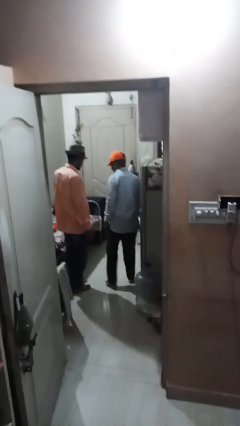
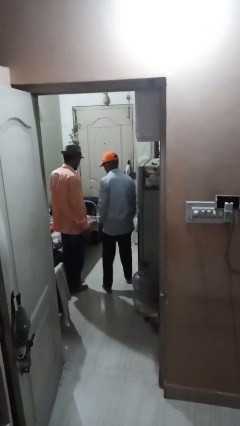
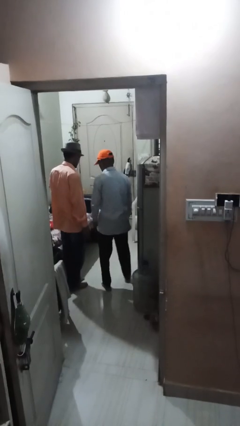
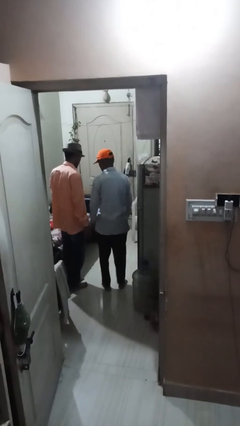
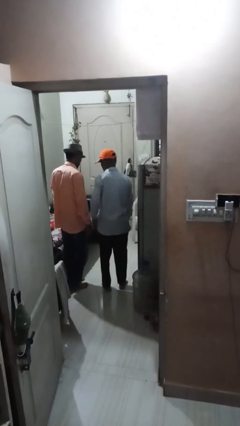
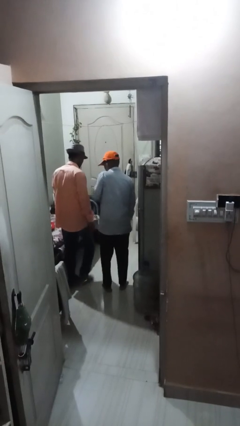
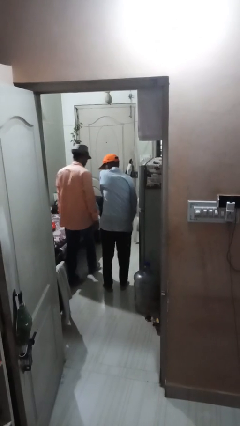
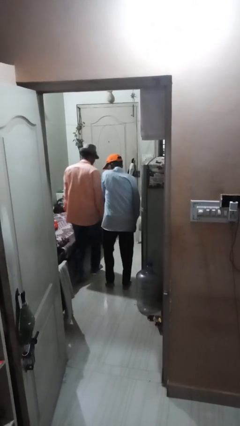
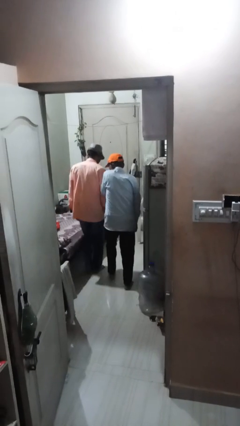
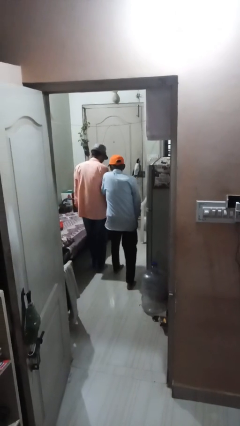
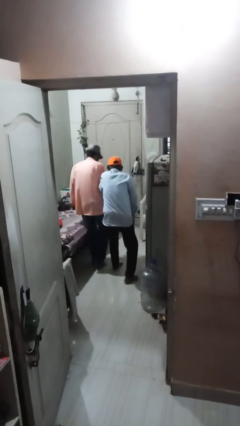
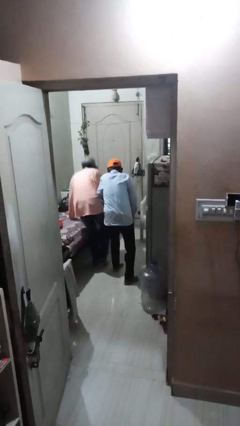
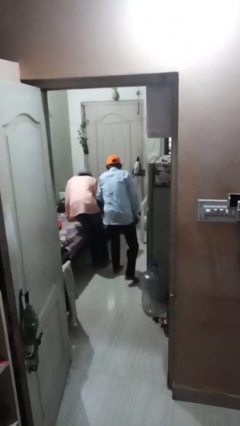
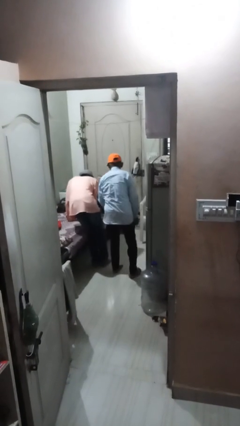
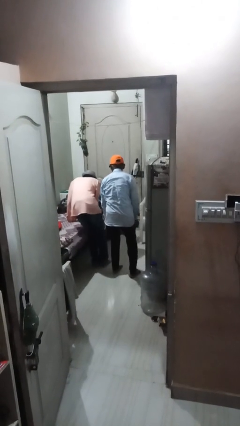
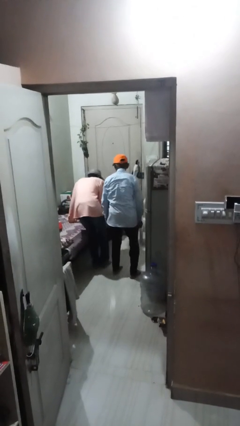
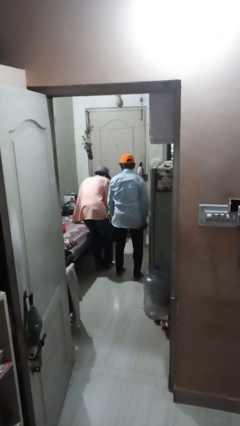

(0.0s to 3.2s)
person bumps into person

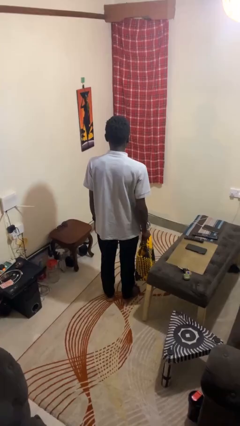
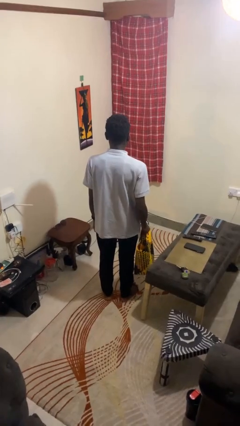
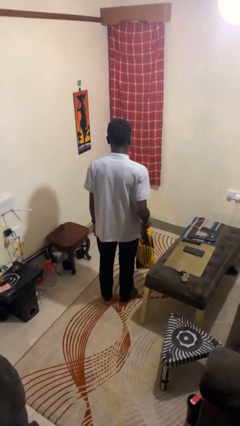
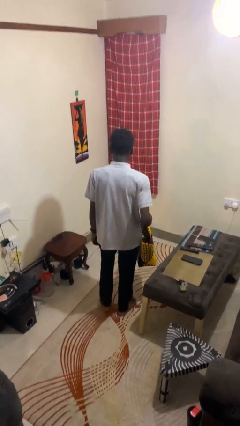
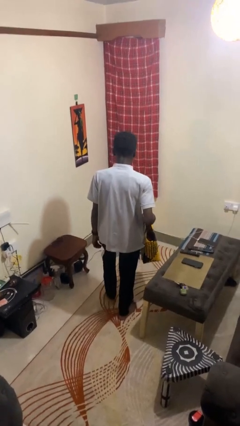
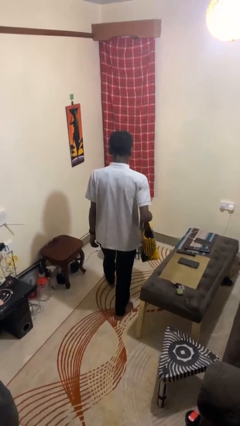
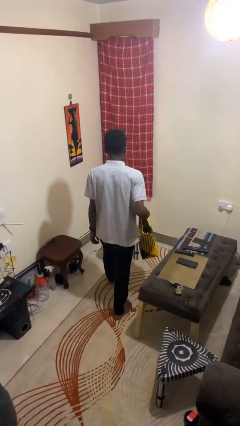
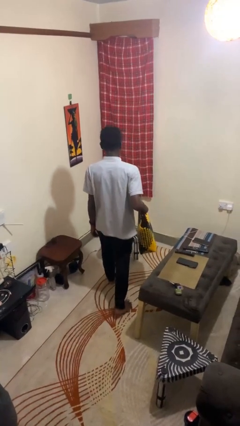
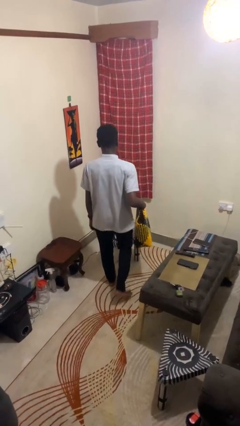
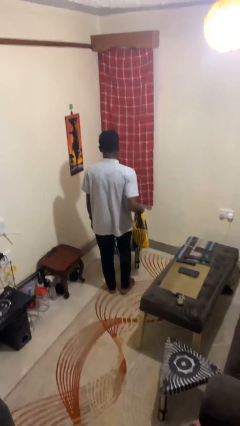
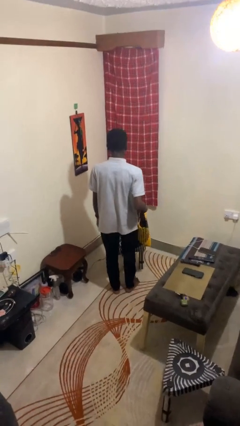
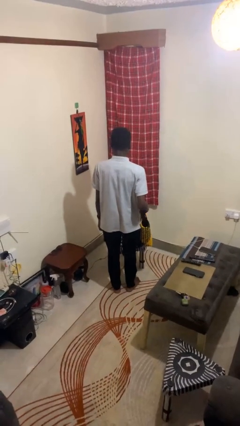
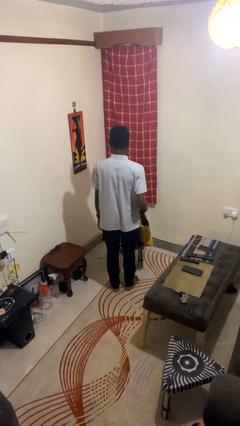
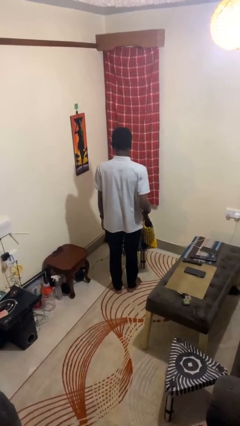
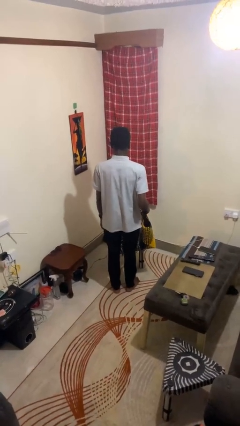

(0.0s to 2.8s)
person carries groceries

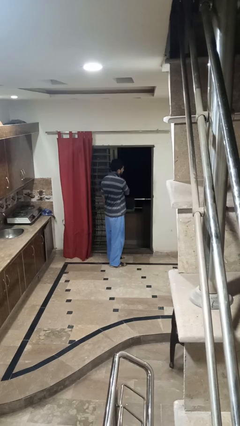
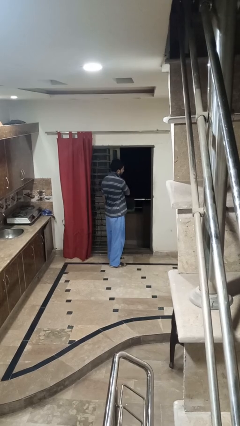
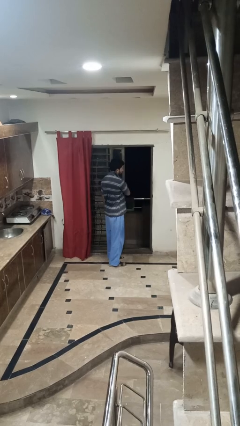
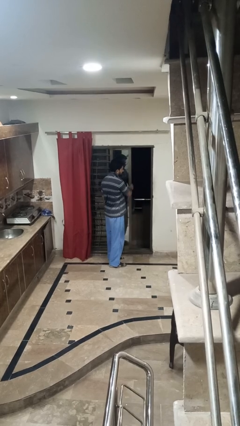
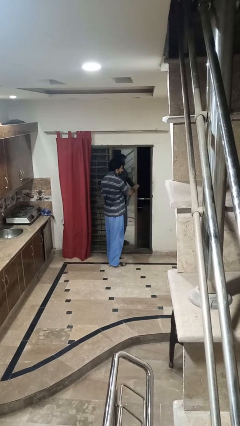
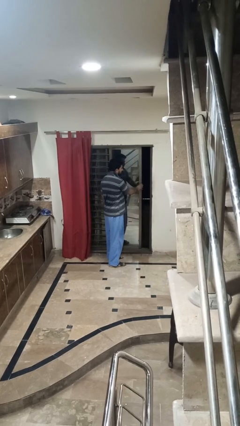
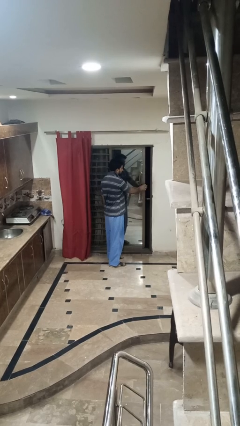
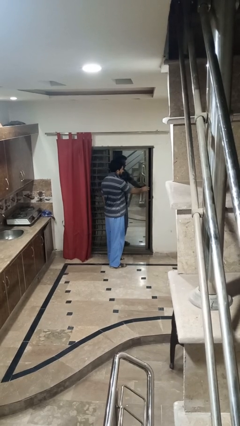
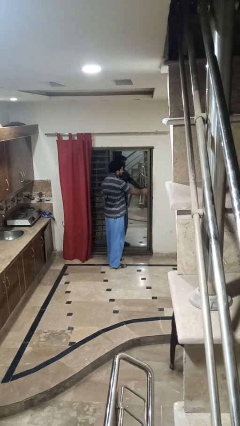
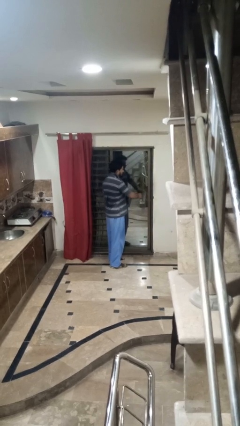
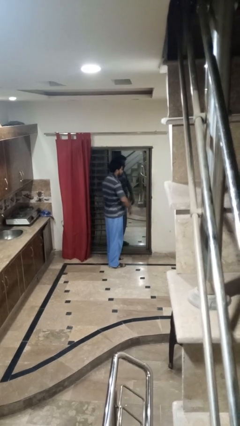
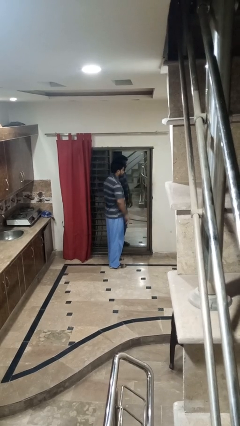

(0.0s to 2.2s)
person closes sliding door

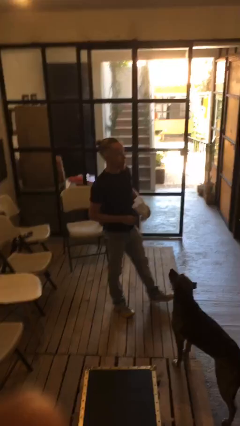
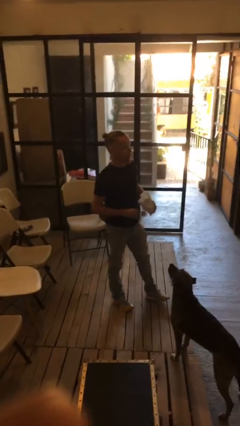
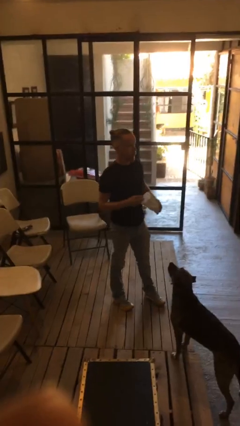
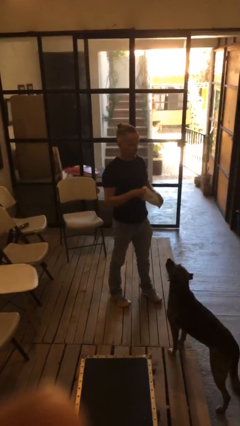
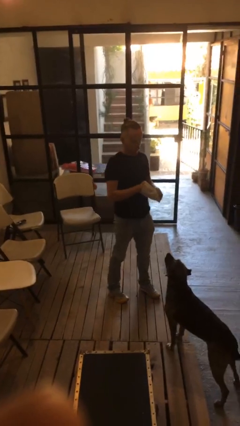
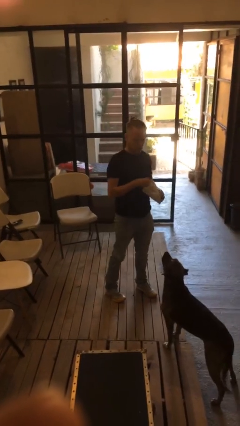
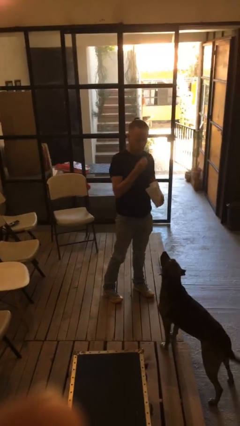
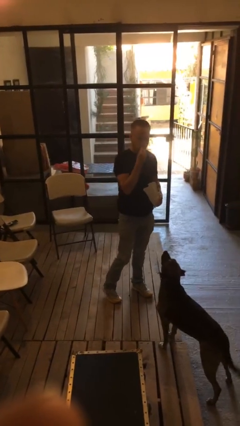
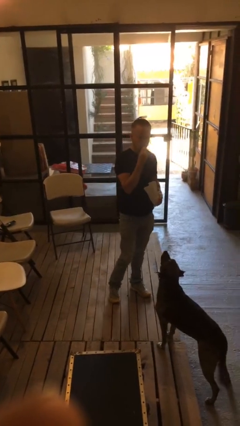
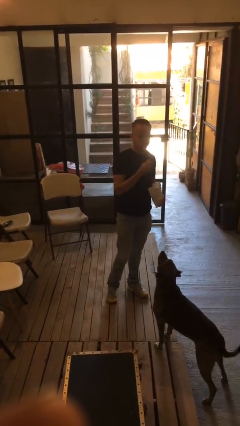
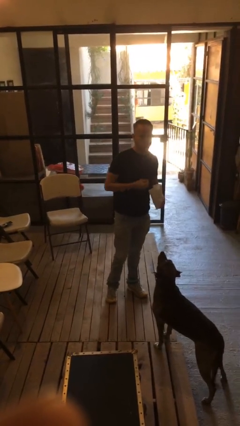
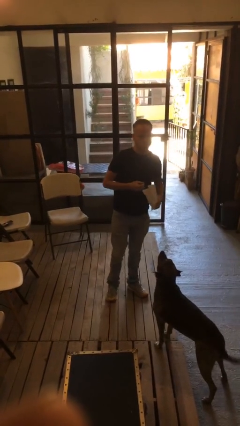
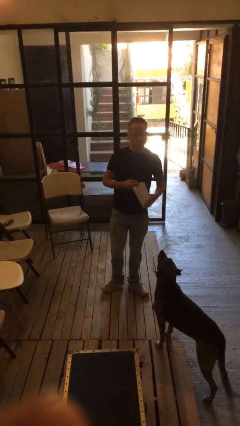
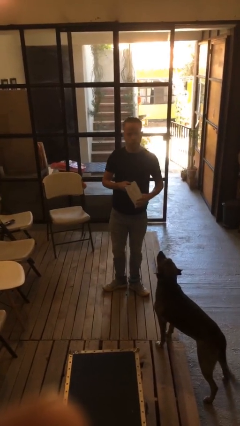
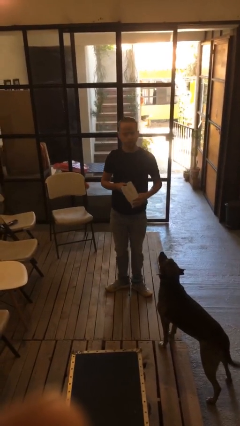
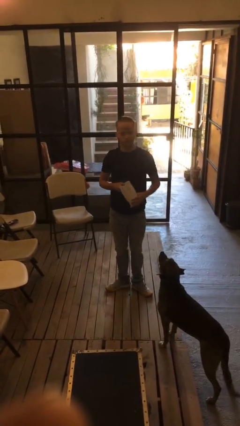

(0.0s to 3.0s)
person eats snack from bag

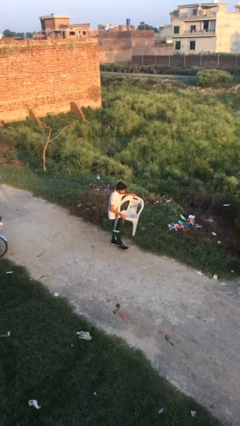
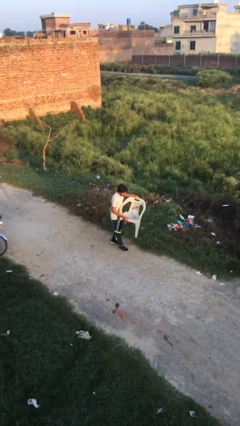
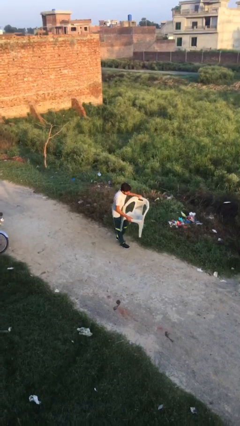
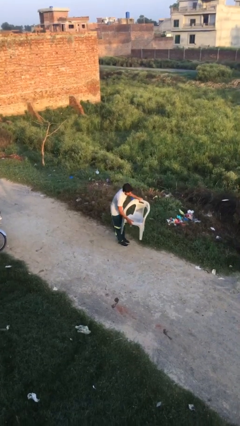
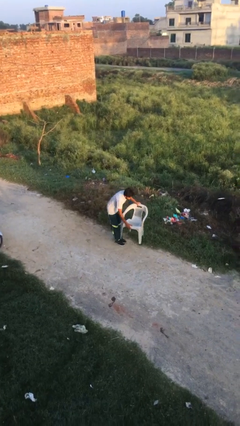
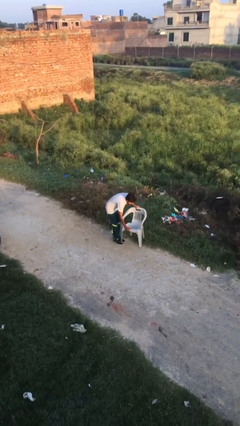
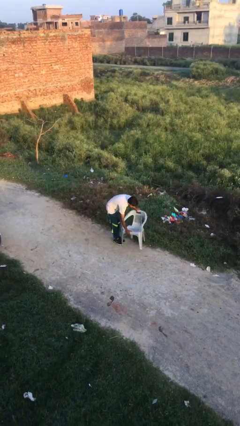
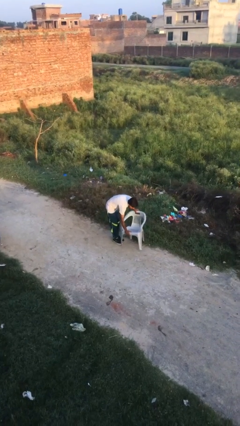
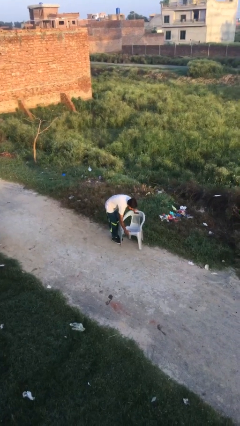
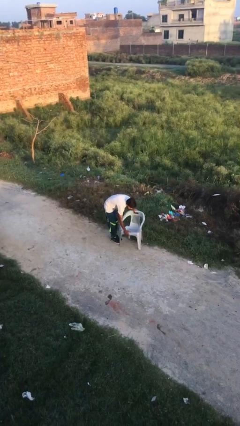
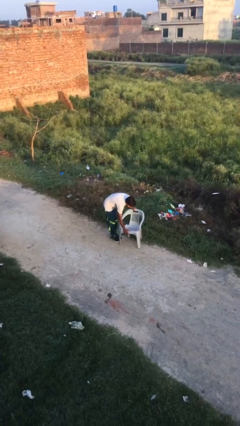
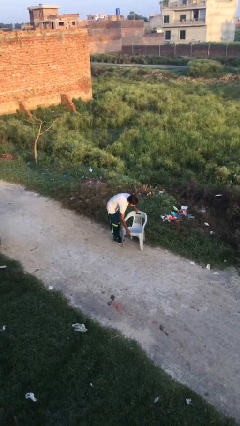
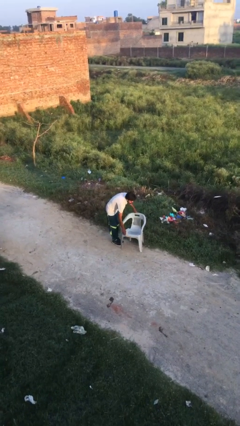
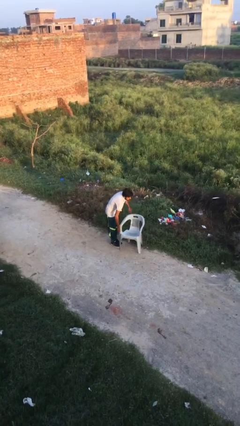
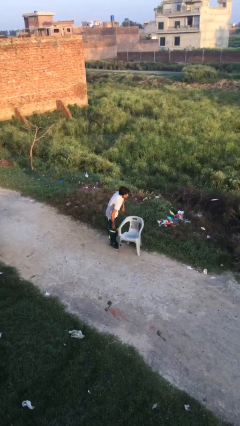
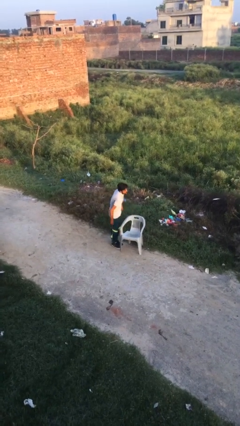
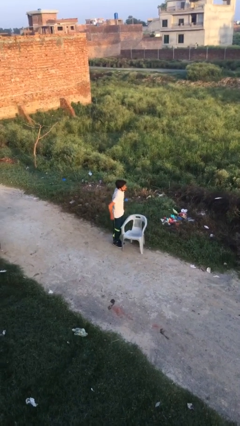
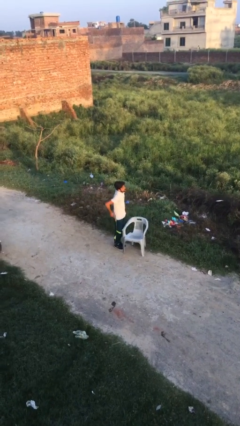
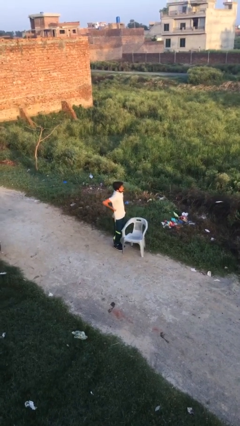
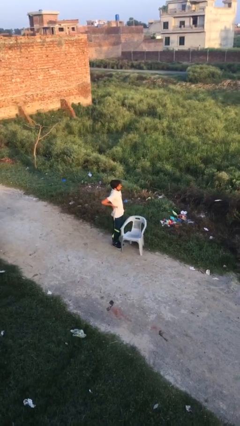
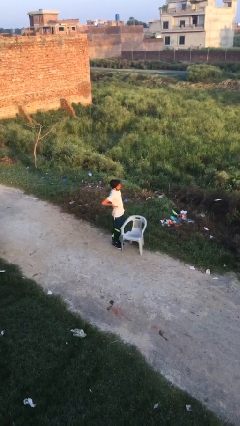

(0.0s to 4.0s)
person puts down object on floor

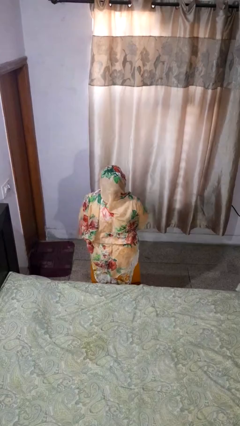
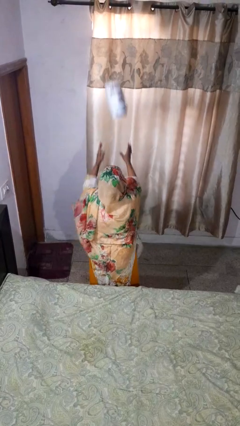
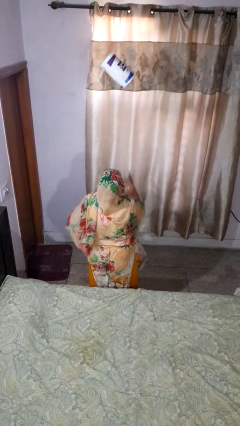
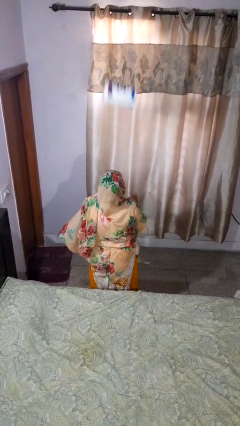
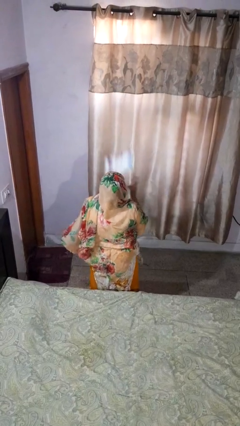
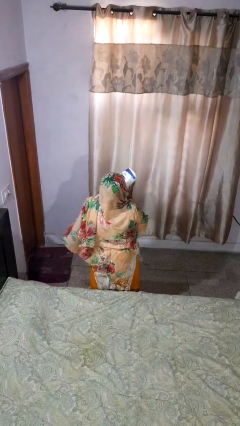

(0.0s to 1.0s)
person drops object

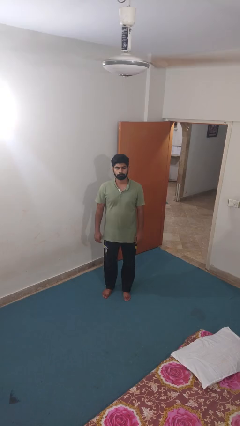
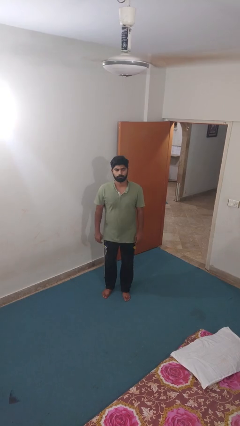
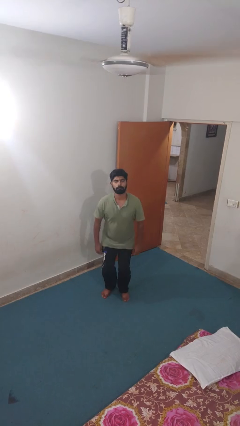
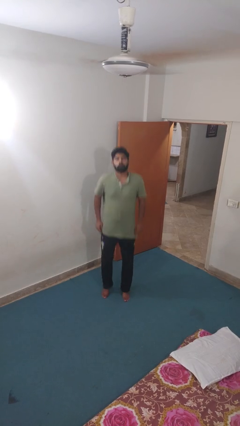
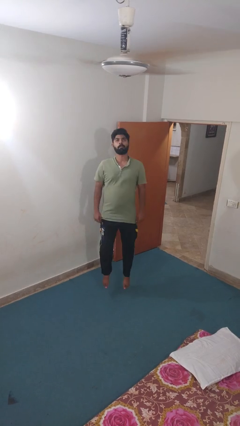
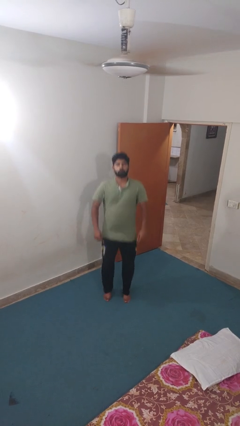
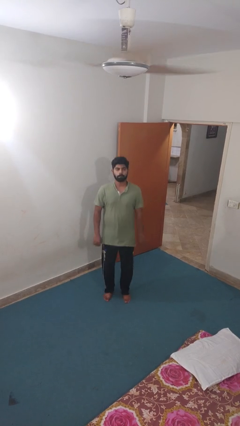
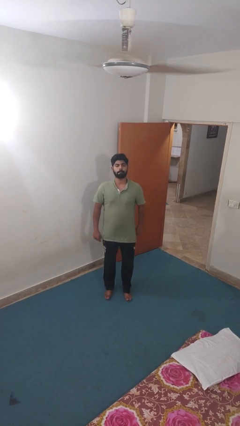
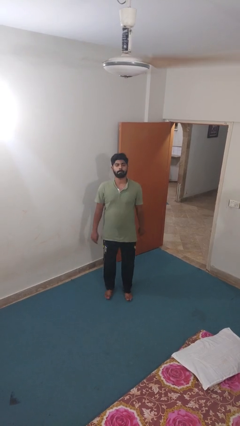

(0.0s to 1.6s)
person jumps
